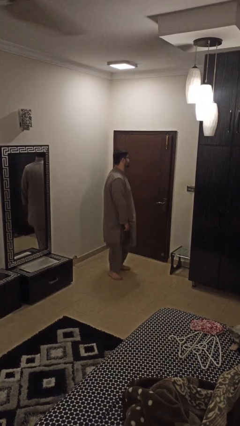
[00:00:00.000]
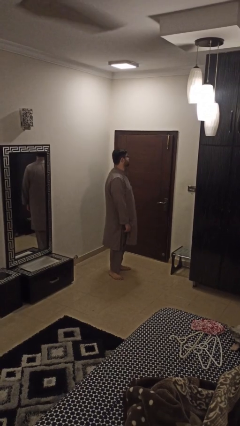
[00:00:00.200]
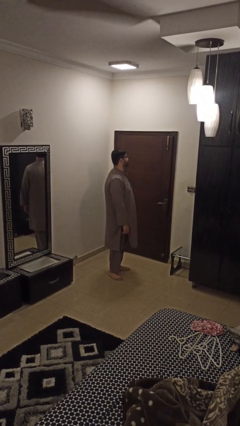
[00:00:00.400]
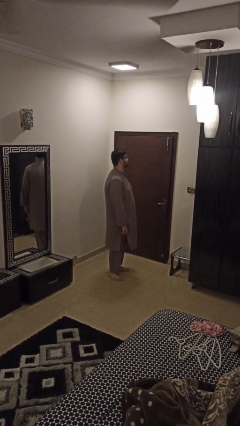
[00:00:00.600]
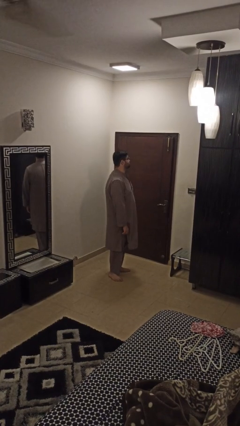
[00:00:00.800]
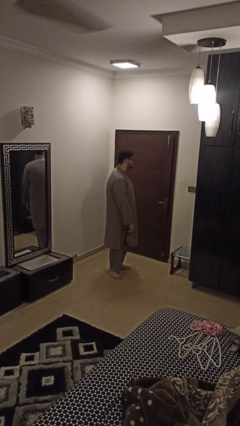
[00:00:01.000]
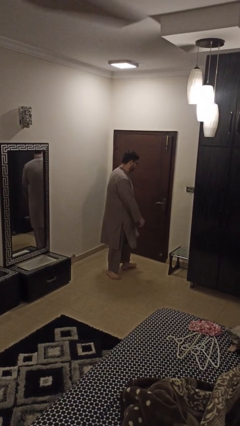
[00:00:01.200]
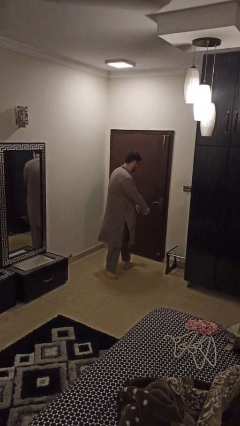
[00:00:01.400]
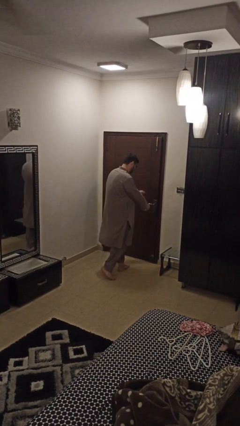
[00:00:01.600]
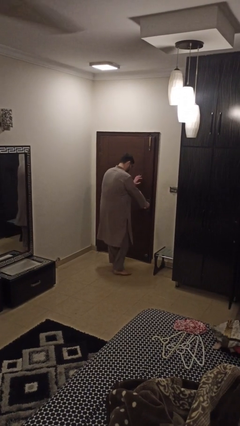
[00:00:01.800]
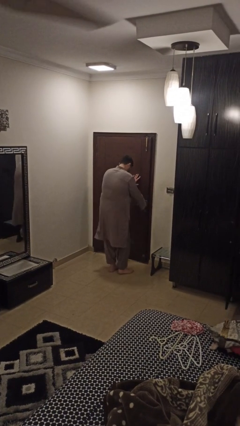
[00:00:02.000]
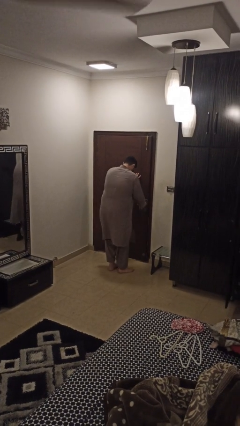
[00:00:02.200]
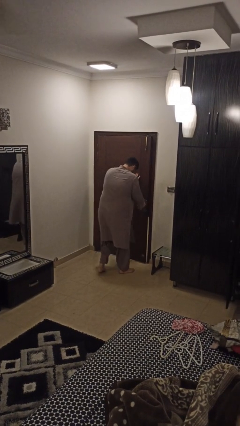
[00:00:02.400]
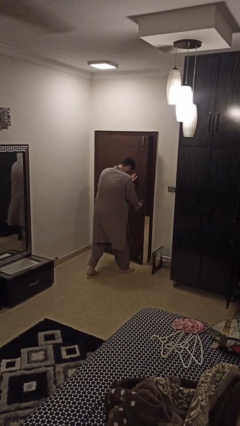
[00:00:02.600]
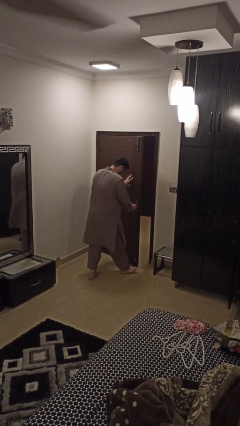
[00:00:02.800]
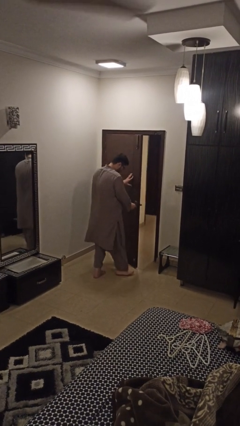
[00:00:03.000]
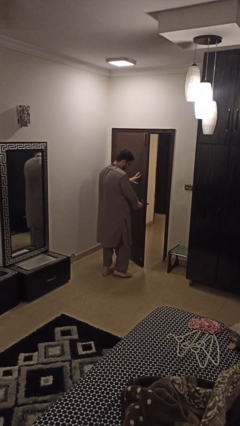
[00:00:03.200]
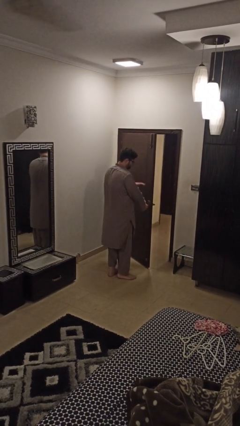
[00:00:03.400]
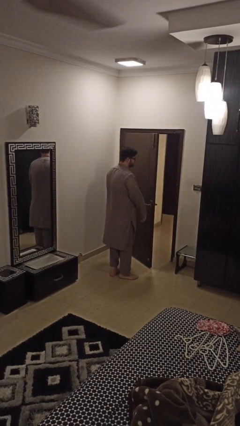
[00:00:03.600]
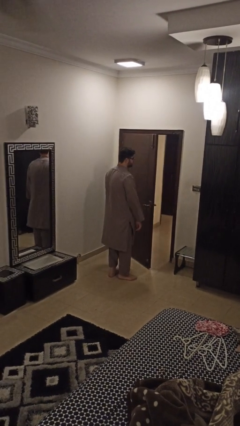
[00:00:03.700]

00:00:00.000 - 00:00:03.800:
person opens facility door

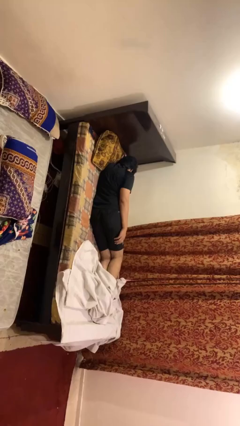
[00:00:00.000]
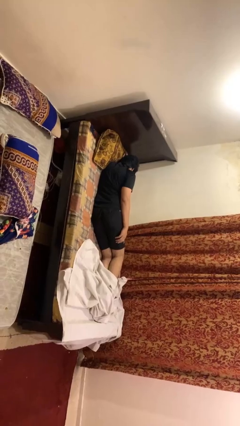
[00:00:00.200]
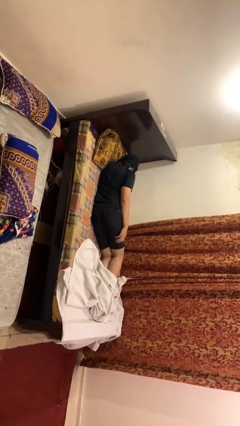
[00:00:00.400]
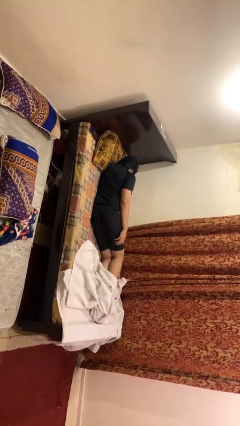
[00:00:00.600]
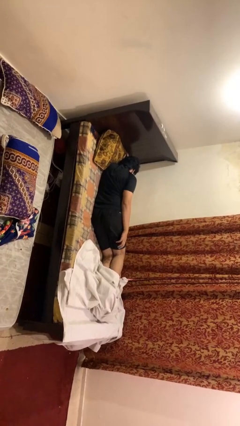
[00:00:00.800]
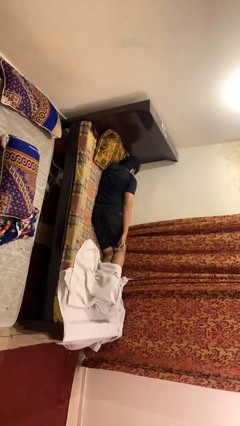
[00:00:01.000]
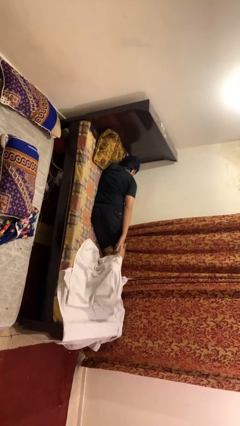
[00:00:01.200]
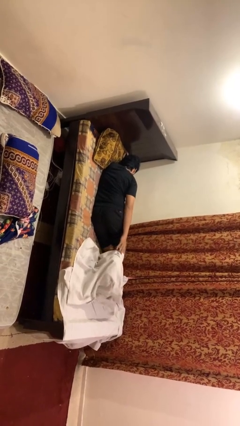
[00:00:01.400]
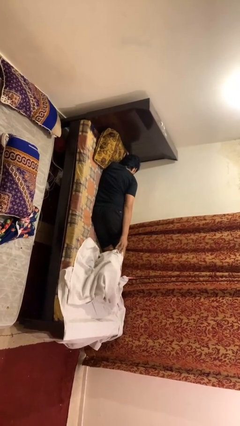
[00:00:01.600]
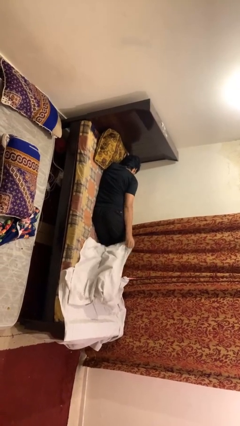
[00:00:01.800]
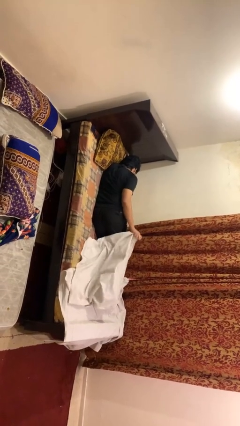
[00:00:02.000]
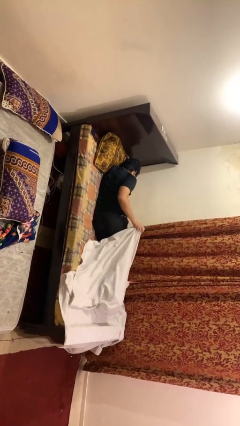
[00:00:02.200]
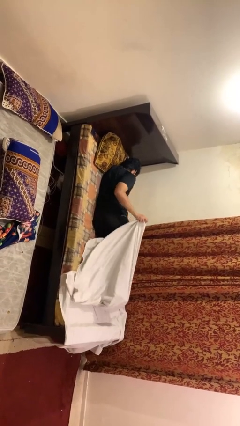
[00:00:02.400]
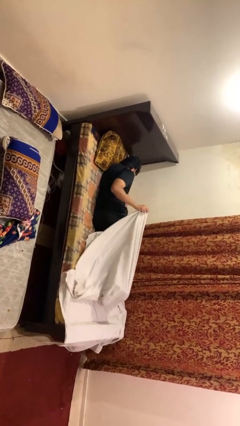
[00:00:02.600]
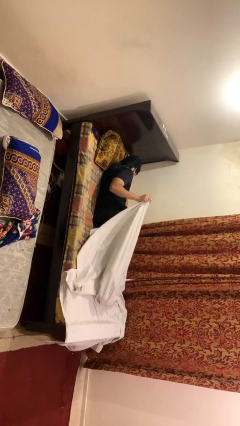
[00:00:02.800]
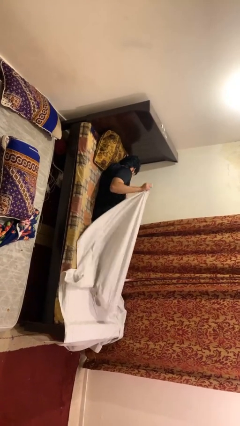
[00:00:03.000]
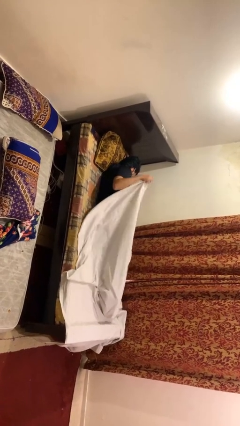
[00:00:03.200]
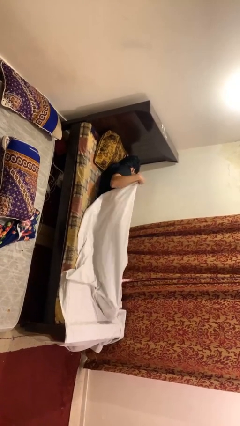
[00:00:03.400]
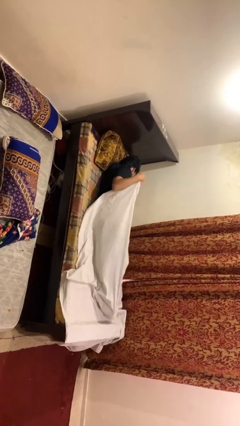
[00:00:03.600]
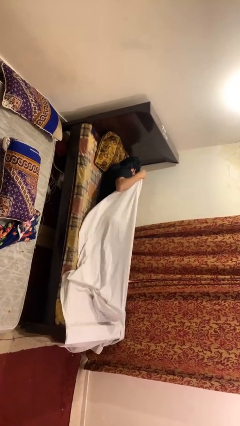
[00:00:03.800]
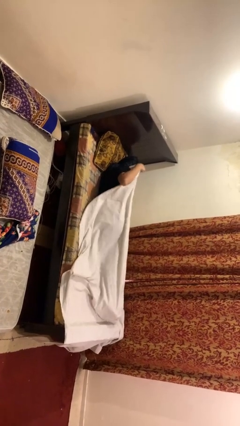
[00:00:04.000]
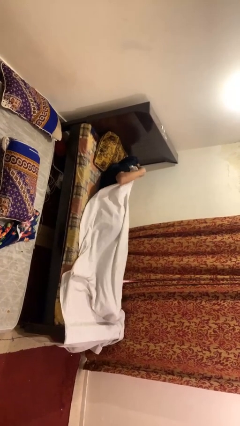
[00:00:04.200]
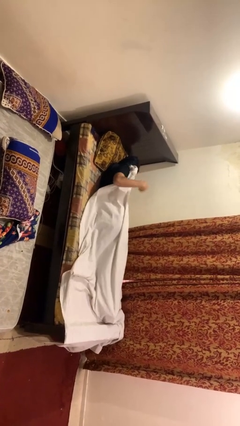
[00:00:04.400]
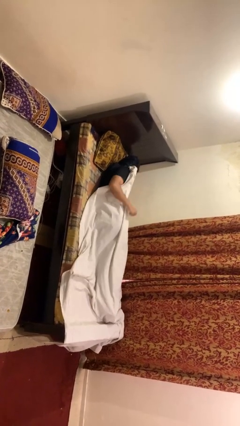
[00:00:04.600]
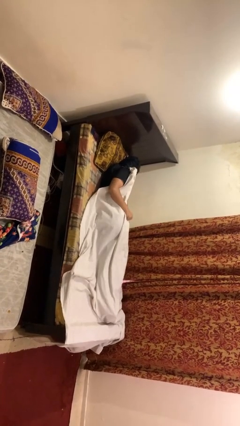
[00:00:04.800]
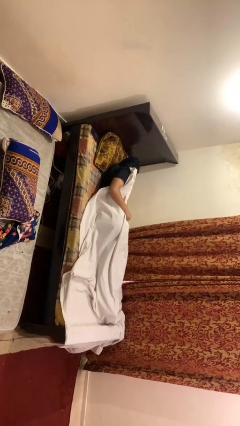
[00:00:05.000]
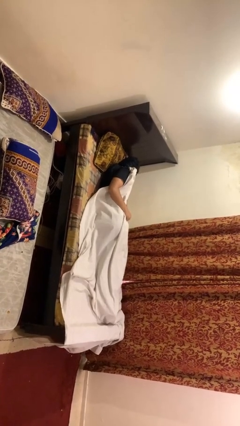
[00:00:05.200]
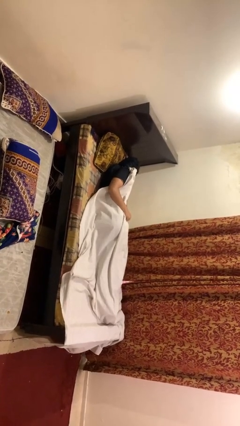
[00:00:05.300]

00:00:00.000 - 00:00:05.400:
person covers with bedsheets

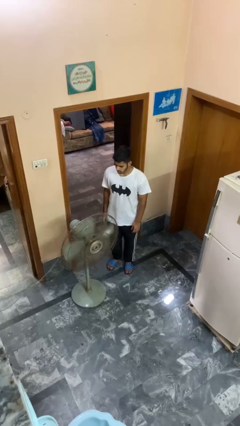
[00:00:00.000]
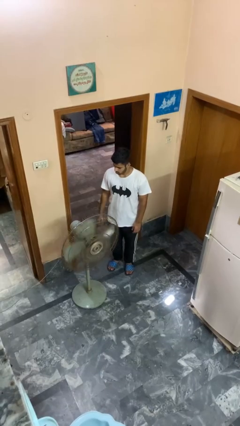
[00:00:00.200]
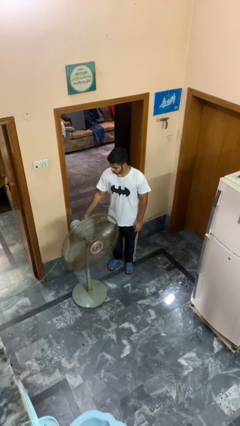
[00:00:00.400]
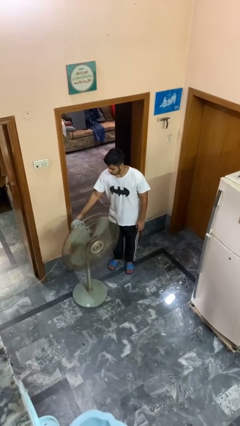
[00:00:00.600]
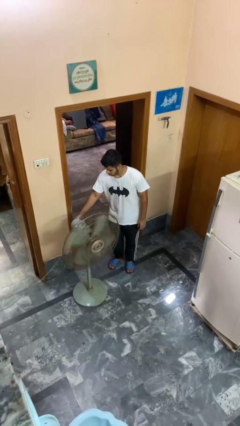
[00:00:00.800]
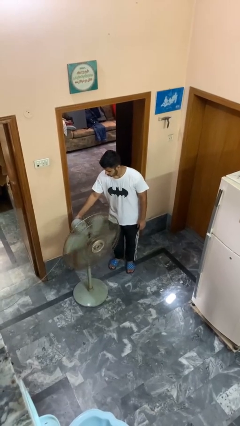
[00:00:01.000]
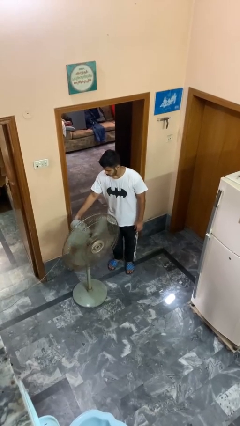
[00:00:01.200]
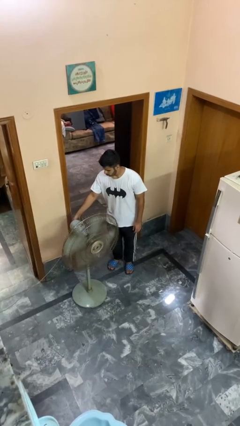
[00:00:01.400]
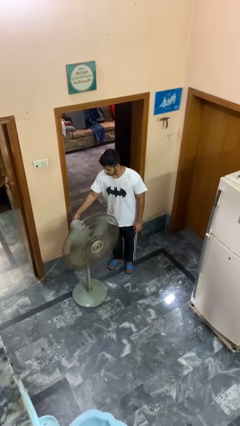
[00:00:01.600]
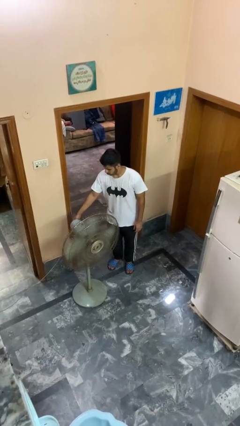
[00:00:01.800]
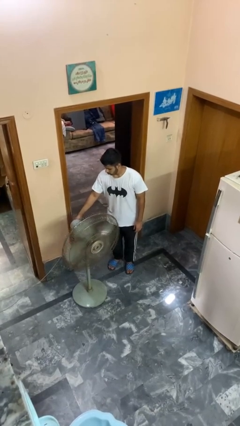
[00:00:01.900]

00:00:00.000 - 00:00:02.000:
person turns on fan

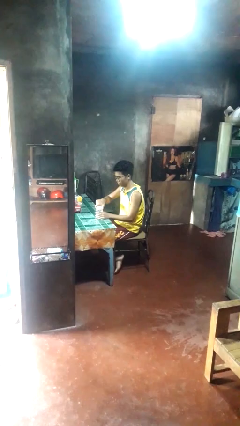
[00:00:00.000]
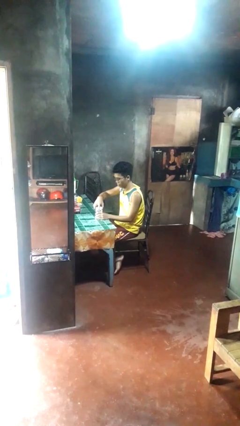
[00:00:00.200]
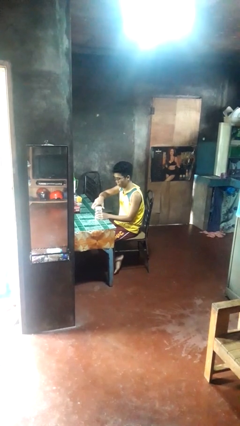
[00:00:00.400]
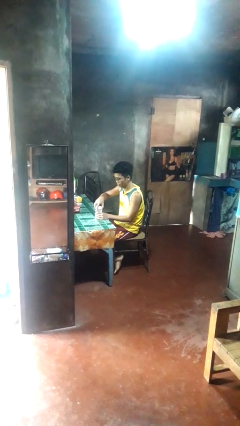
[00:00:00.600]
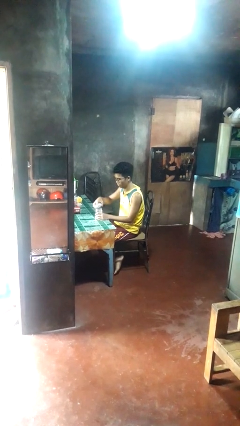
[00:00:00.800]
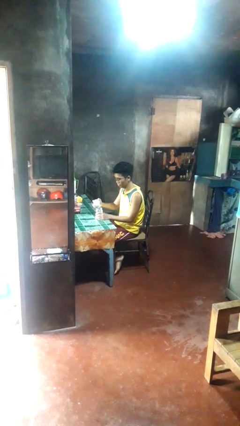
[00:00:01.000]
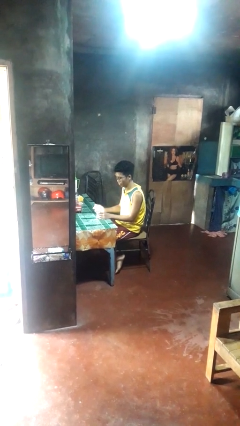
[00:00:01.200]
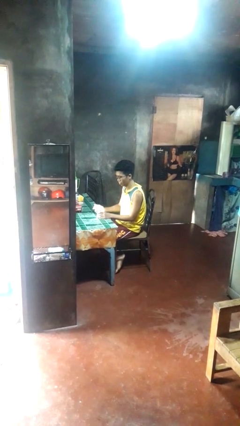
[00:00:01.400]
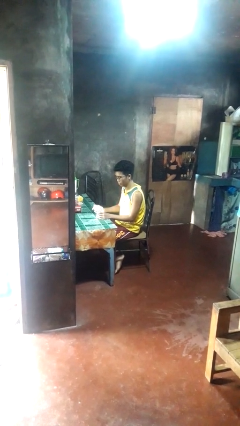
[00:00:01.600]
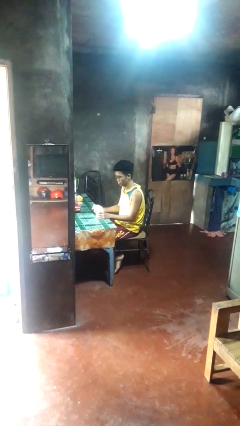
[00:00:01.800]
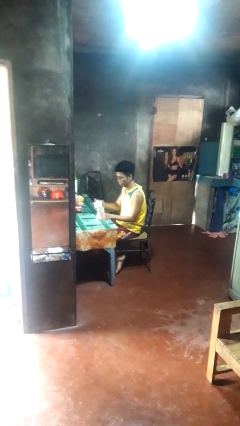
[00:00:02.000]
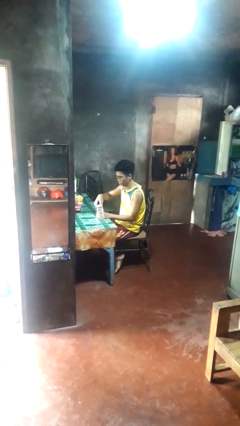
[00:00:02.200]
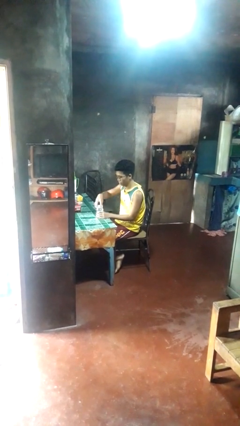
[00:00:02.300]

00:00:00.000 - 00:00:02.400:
person opens jar

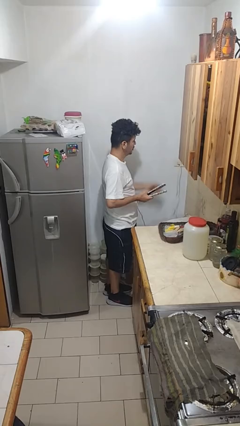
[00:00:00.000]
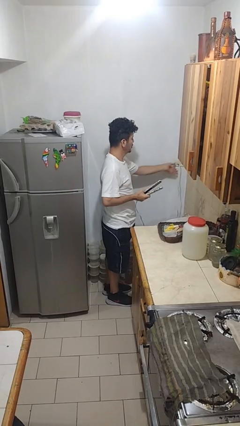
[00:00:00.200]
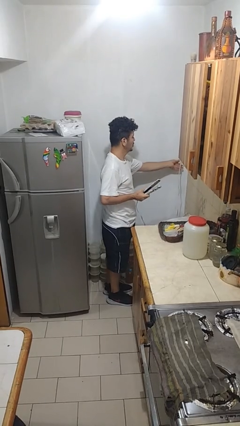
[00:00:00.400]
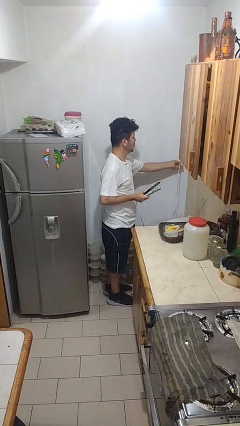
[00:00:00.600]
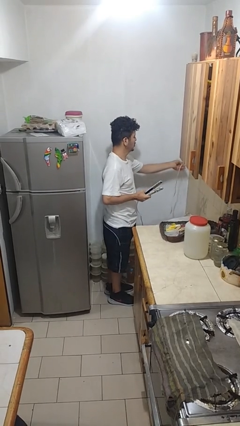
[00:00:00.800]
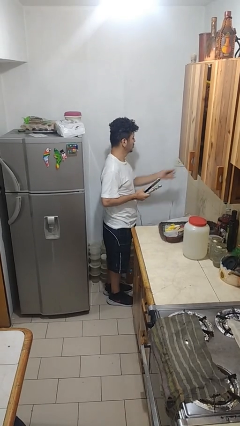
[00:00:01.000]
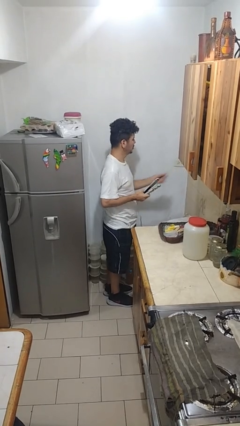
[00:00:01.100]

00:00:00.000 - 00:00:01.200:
person unplugs from electrical socket

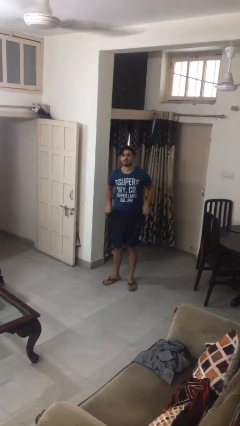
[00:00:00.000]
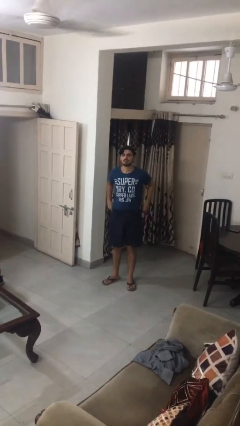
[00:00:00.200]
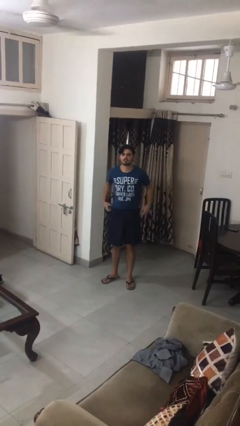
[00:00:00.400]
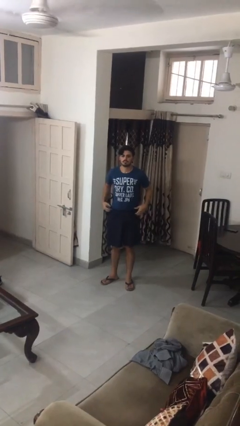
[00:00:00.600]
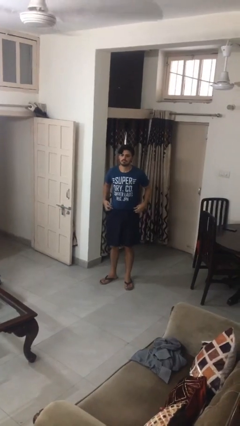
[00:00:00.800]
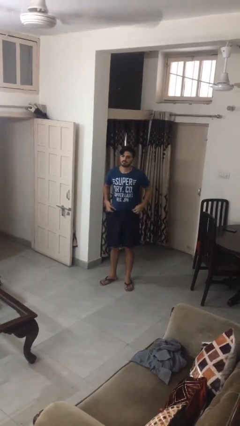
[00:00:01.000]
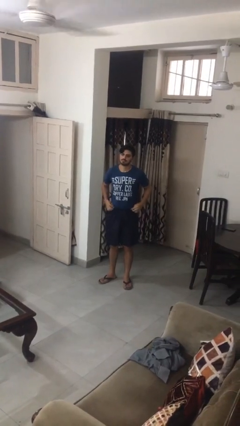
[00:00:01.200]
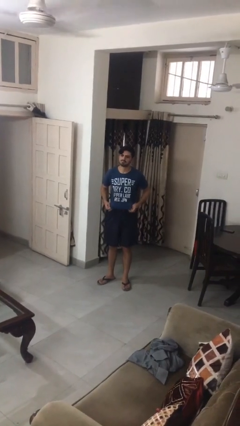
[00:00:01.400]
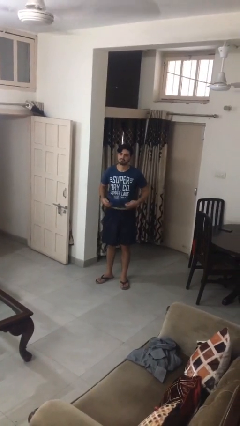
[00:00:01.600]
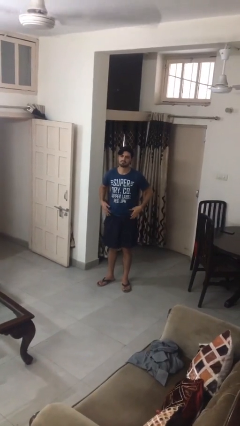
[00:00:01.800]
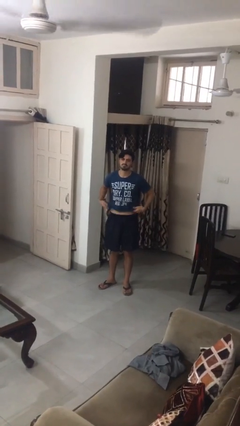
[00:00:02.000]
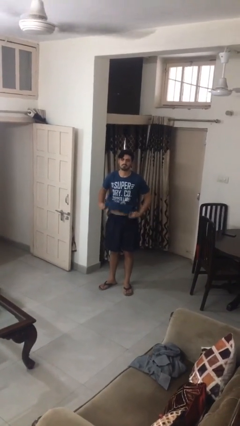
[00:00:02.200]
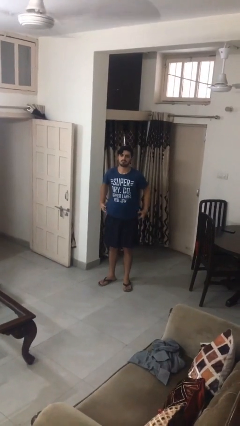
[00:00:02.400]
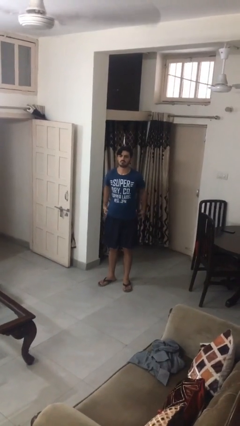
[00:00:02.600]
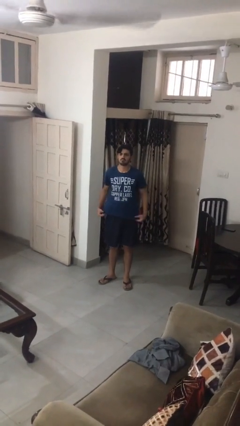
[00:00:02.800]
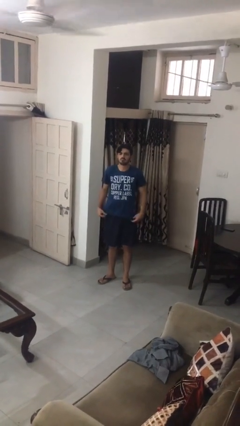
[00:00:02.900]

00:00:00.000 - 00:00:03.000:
person untucks shirt
